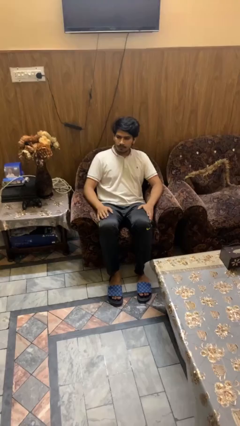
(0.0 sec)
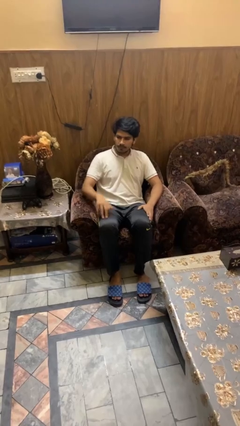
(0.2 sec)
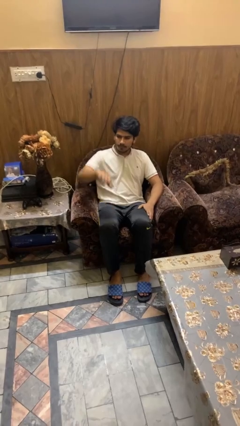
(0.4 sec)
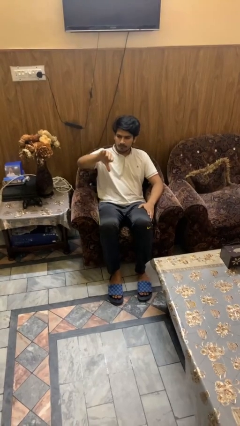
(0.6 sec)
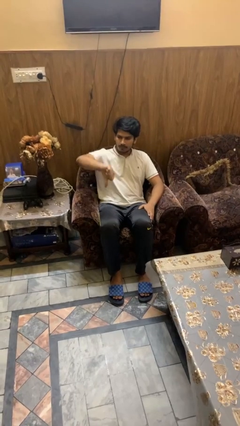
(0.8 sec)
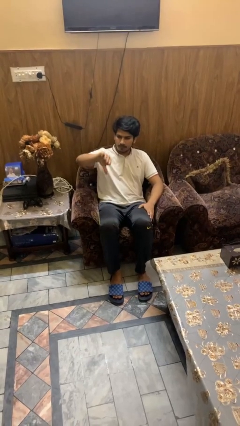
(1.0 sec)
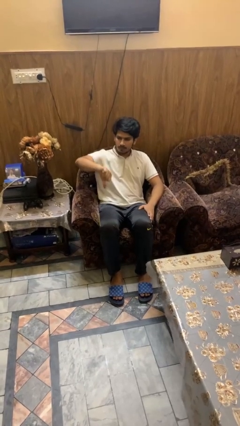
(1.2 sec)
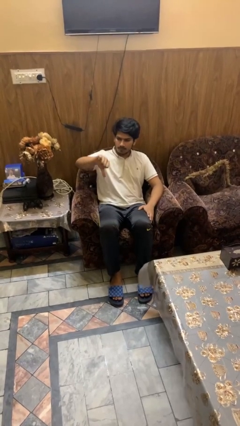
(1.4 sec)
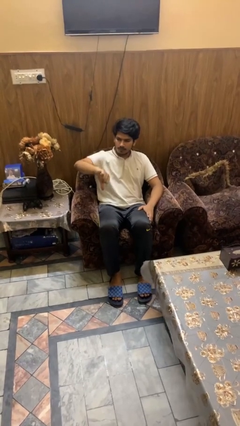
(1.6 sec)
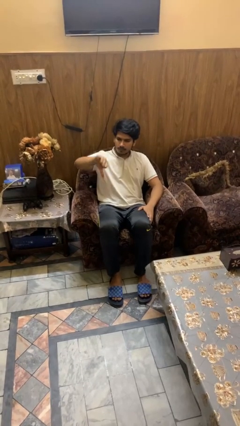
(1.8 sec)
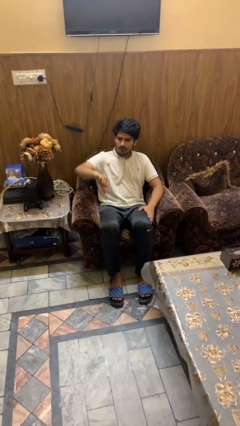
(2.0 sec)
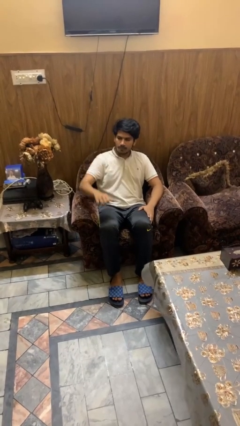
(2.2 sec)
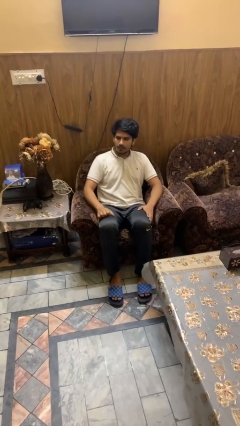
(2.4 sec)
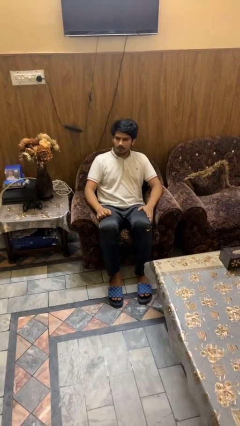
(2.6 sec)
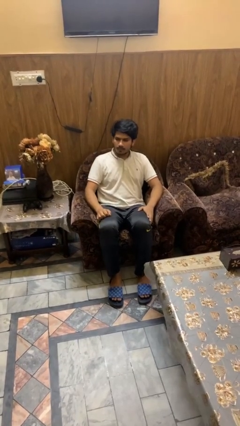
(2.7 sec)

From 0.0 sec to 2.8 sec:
person gestures thumbs down

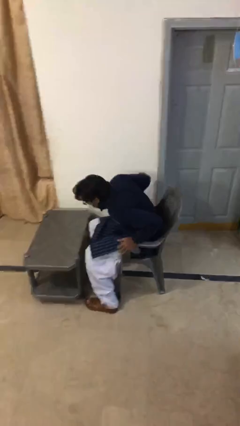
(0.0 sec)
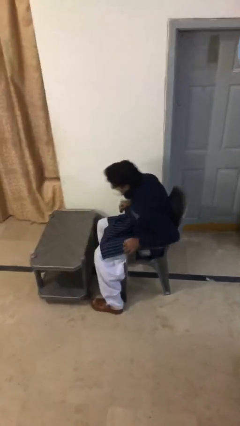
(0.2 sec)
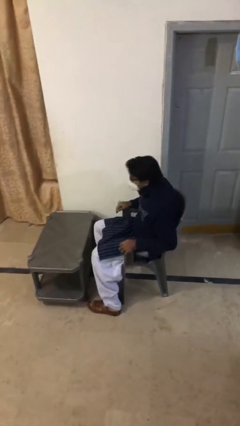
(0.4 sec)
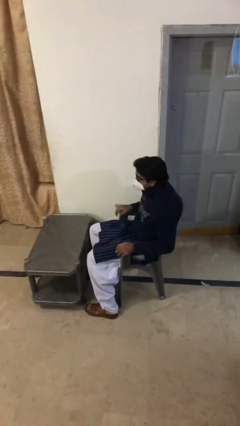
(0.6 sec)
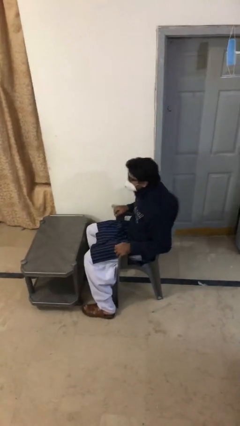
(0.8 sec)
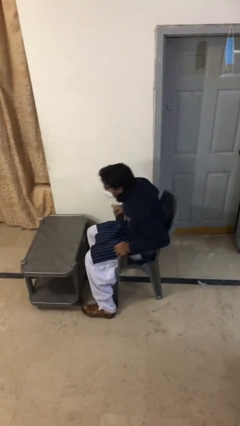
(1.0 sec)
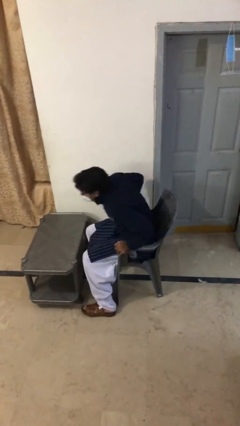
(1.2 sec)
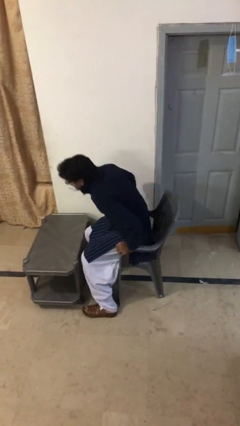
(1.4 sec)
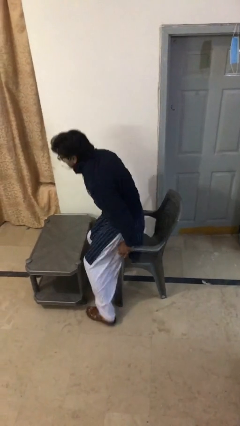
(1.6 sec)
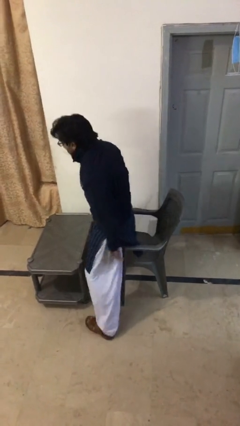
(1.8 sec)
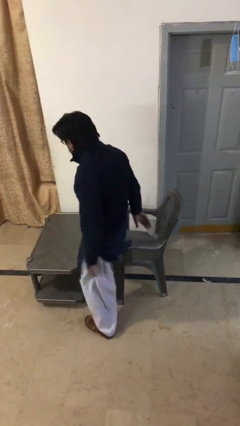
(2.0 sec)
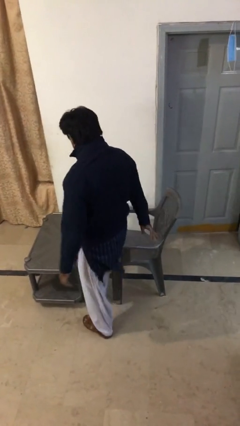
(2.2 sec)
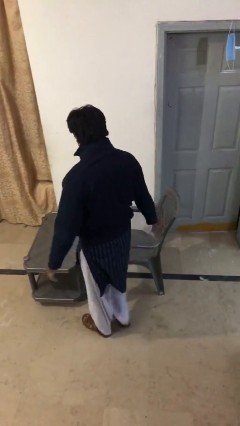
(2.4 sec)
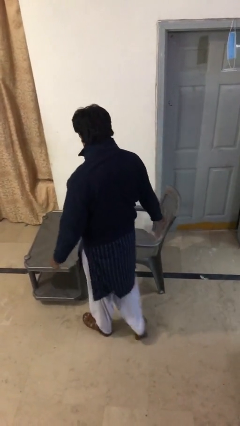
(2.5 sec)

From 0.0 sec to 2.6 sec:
person stands up

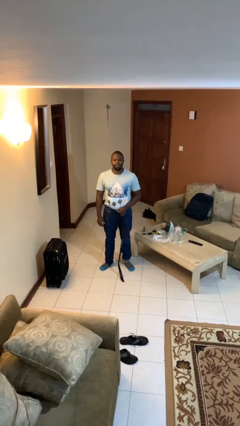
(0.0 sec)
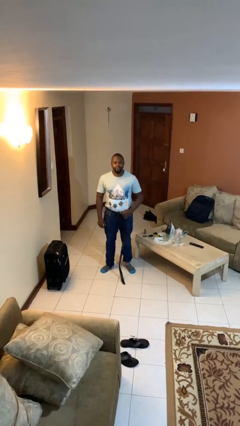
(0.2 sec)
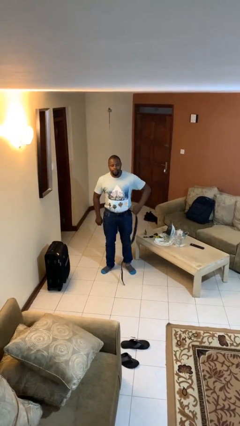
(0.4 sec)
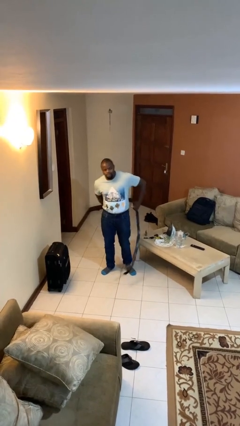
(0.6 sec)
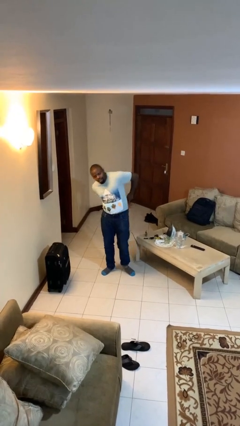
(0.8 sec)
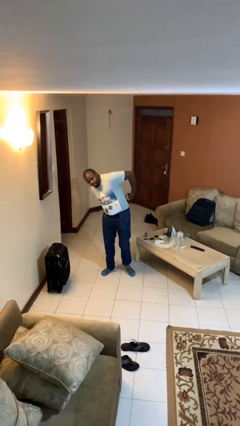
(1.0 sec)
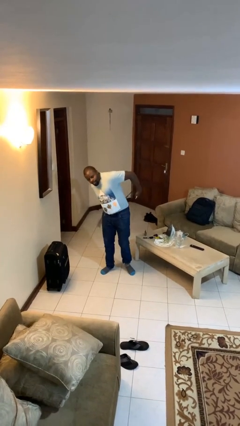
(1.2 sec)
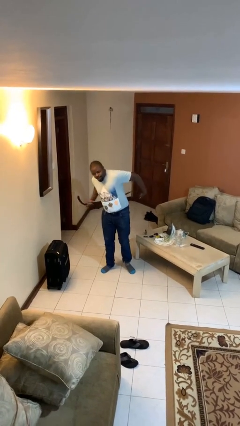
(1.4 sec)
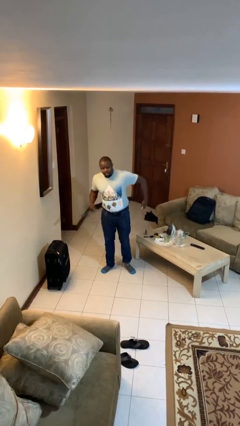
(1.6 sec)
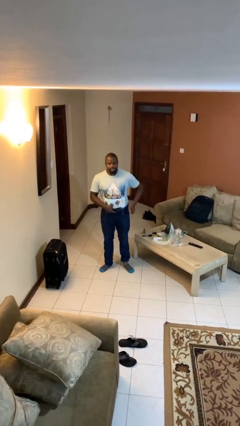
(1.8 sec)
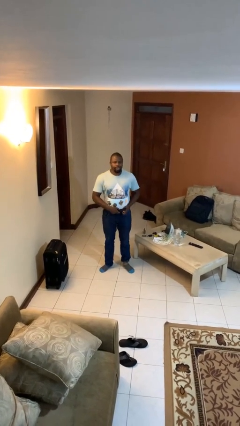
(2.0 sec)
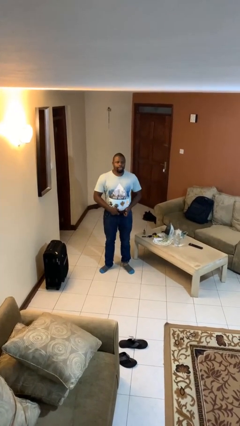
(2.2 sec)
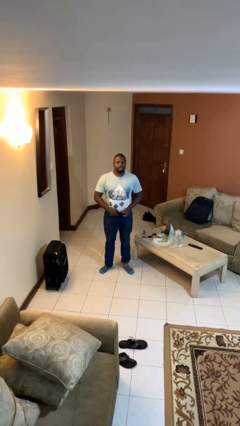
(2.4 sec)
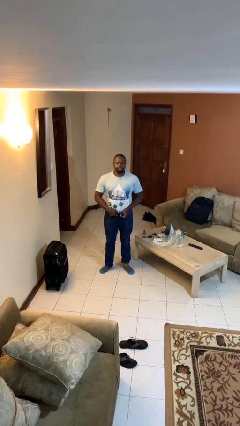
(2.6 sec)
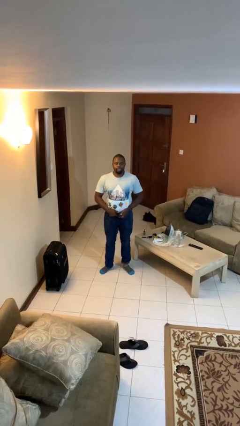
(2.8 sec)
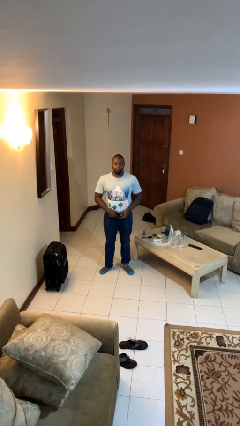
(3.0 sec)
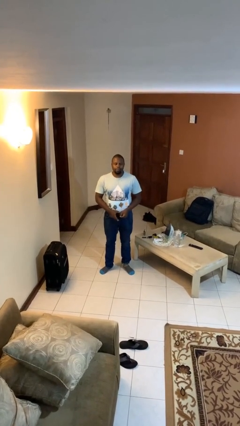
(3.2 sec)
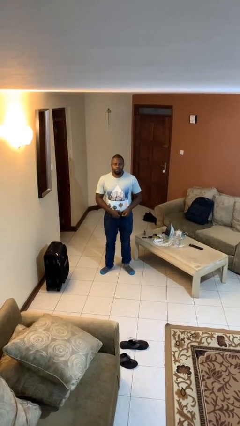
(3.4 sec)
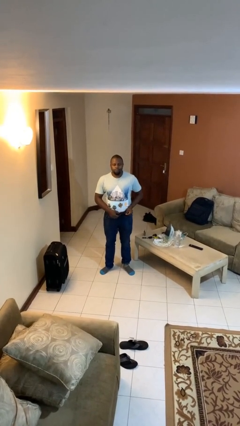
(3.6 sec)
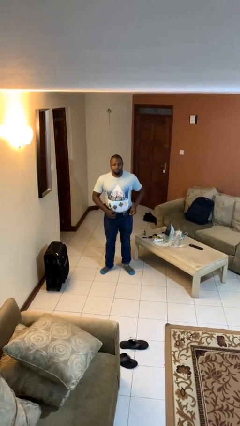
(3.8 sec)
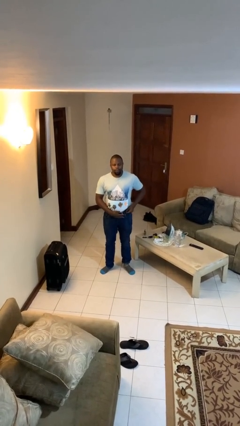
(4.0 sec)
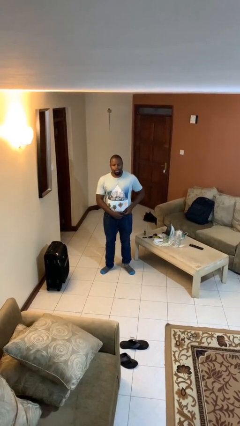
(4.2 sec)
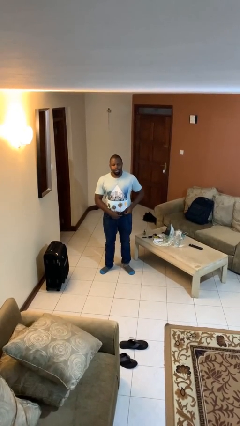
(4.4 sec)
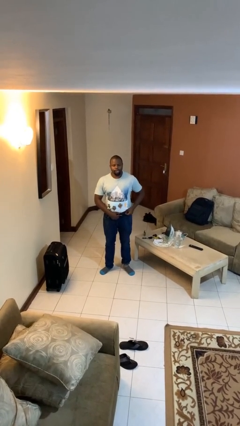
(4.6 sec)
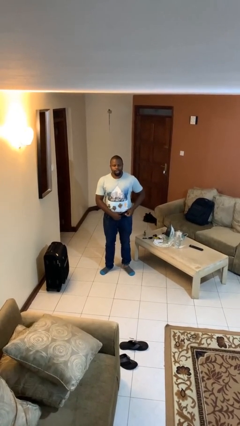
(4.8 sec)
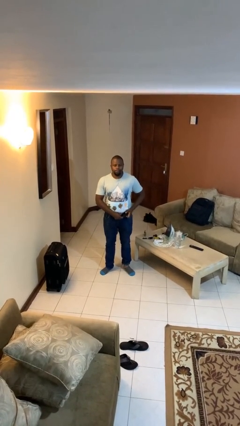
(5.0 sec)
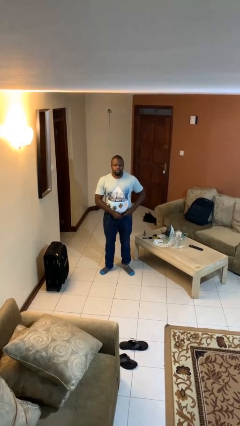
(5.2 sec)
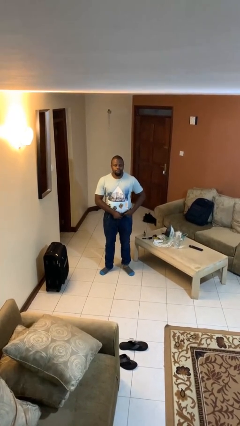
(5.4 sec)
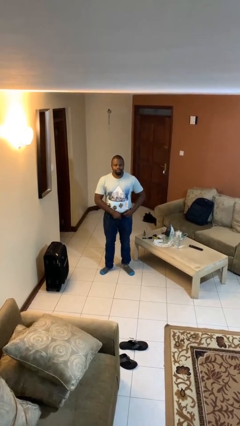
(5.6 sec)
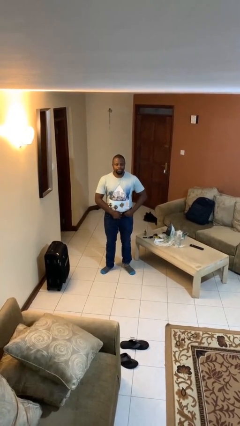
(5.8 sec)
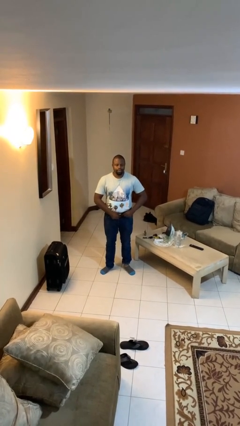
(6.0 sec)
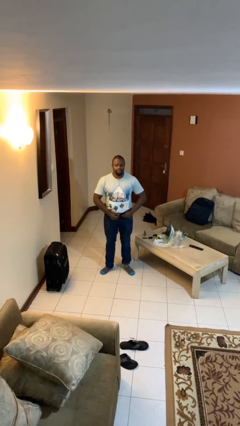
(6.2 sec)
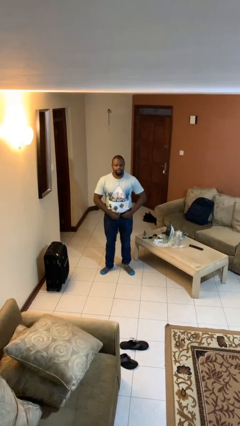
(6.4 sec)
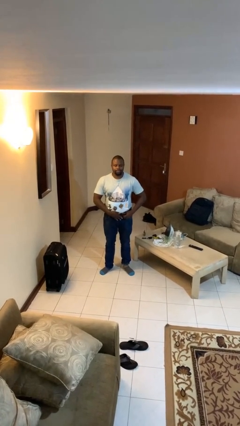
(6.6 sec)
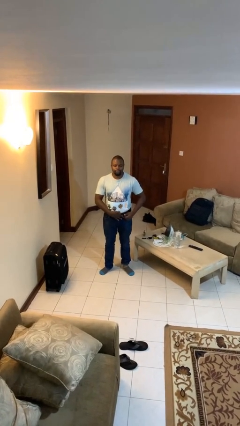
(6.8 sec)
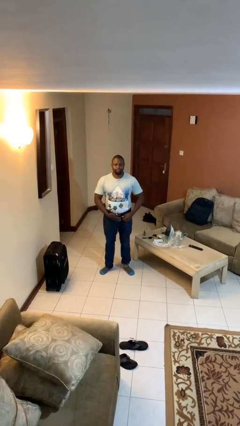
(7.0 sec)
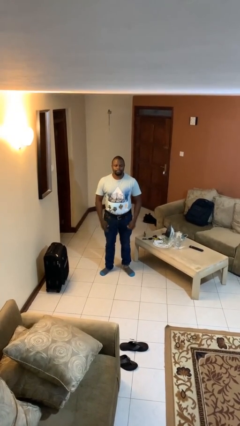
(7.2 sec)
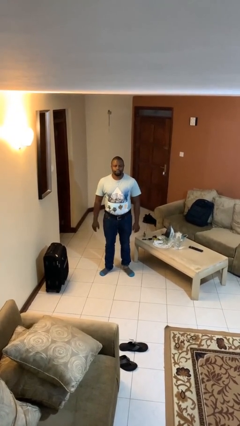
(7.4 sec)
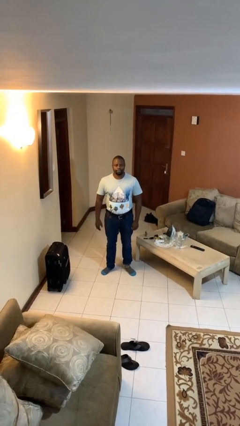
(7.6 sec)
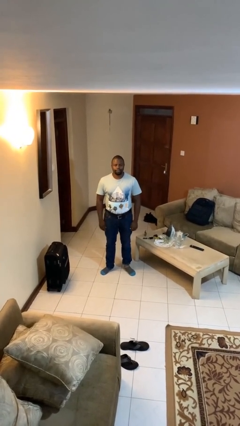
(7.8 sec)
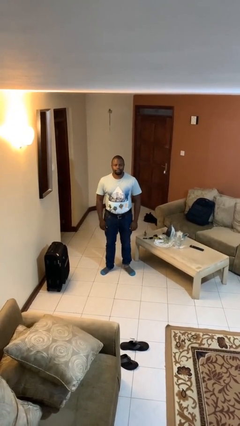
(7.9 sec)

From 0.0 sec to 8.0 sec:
person puts on belt

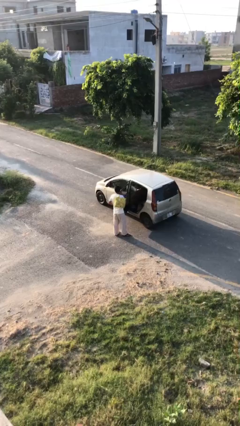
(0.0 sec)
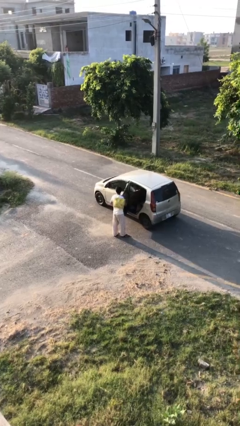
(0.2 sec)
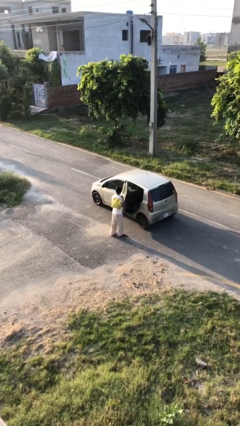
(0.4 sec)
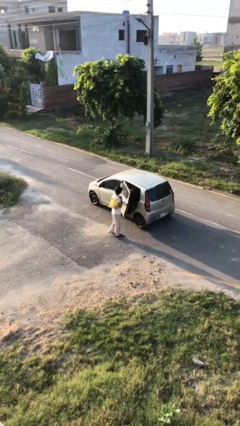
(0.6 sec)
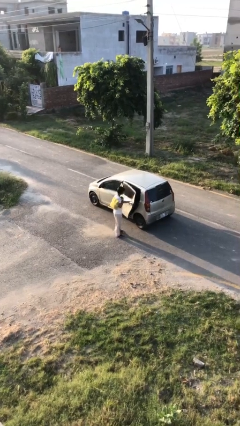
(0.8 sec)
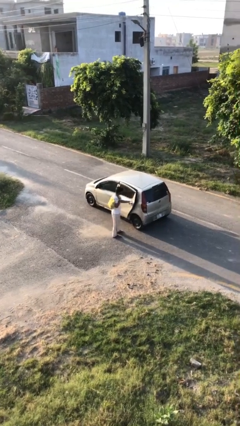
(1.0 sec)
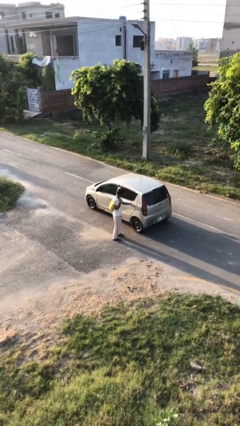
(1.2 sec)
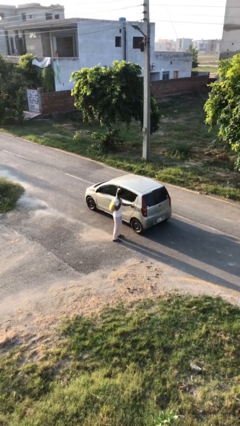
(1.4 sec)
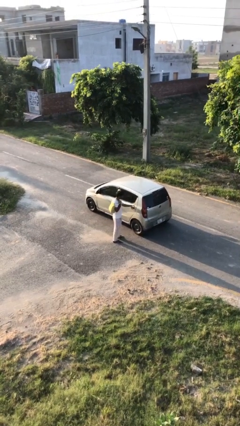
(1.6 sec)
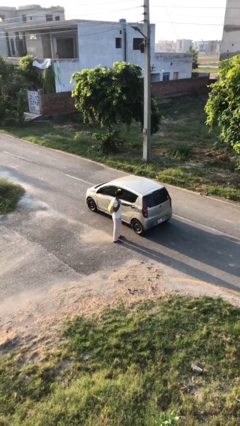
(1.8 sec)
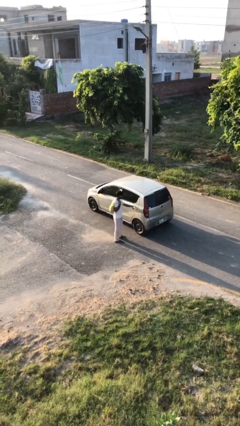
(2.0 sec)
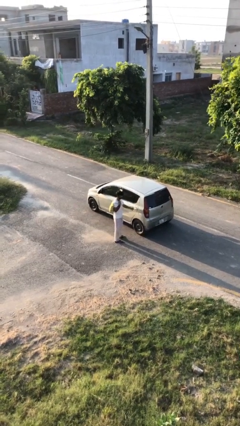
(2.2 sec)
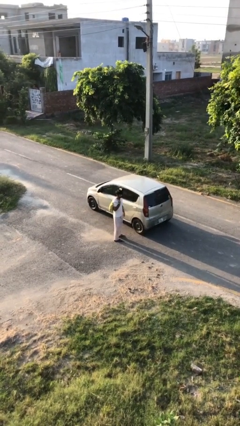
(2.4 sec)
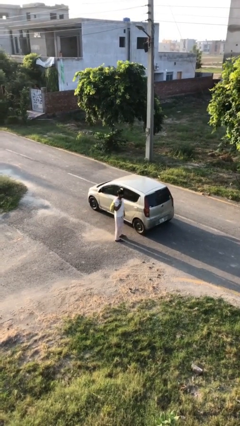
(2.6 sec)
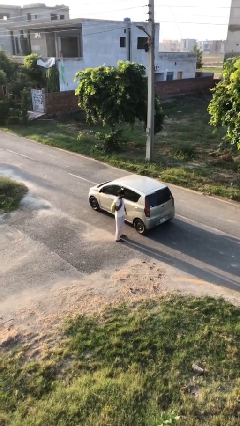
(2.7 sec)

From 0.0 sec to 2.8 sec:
person closes car door

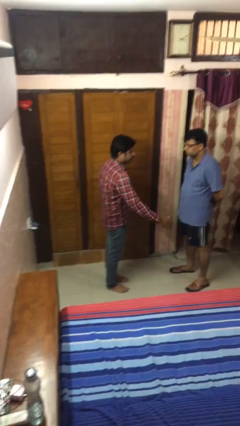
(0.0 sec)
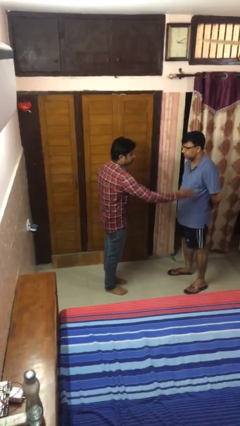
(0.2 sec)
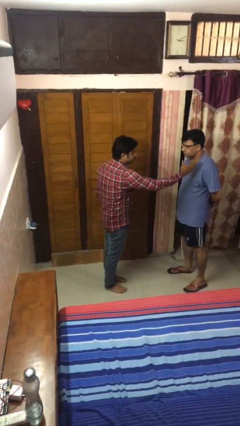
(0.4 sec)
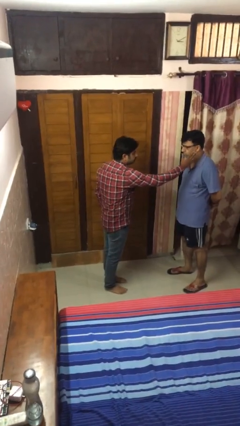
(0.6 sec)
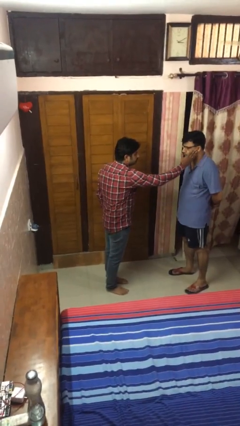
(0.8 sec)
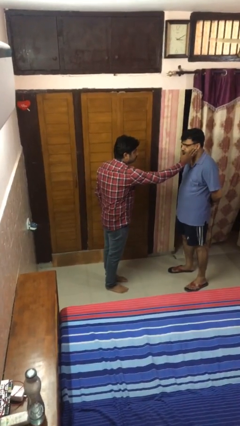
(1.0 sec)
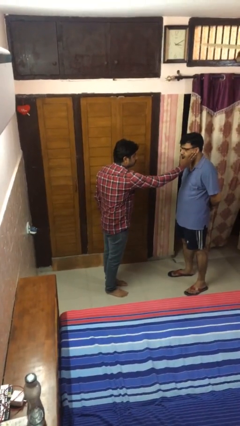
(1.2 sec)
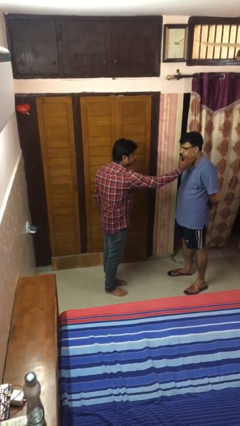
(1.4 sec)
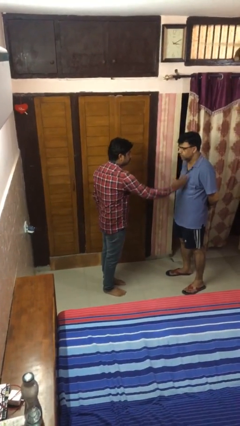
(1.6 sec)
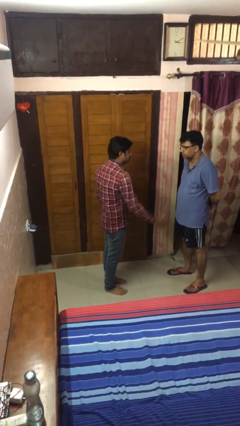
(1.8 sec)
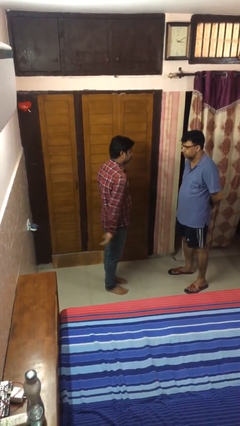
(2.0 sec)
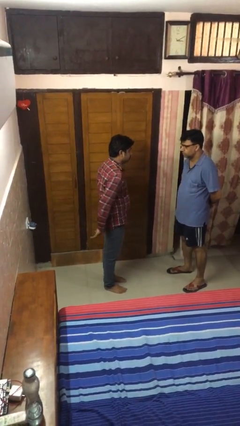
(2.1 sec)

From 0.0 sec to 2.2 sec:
person touches face of person
